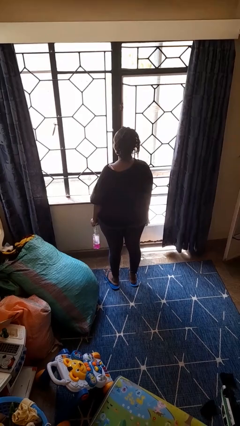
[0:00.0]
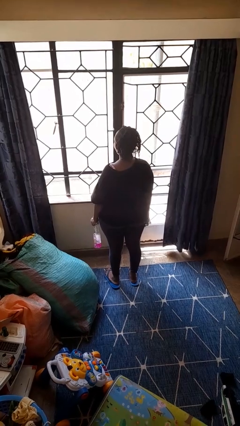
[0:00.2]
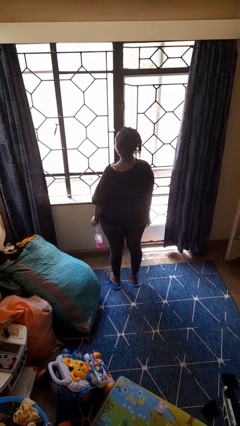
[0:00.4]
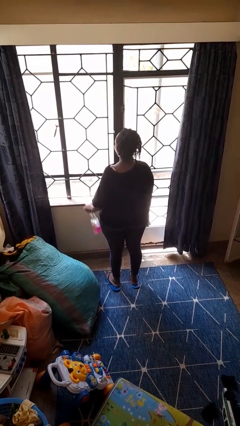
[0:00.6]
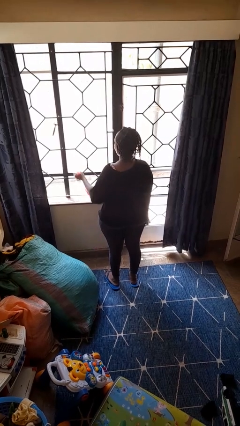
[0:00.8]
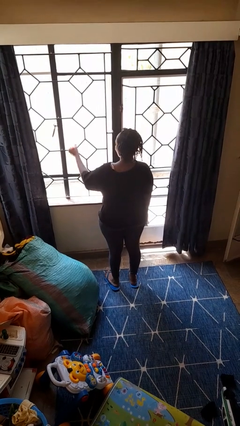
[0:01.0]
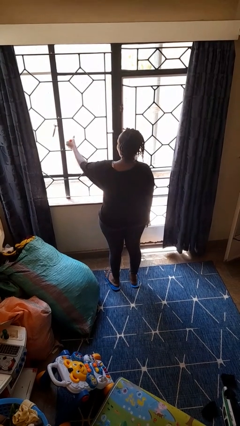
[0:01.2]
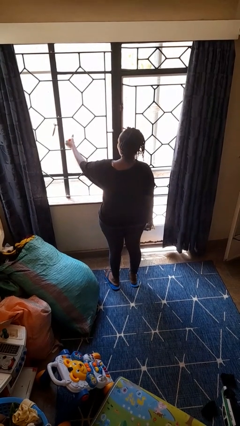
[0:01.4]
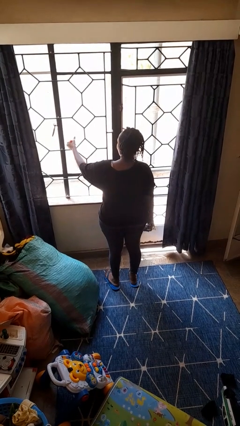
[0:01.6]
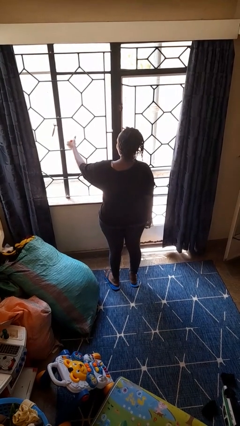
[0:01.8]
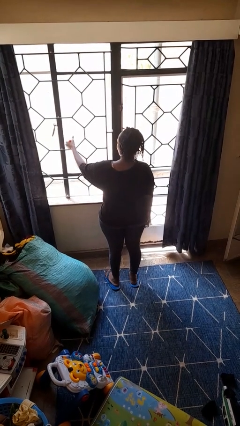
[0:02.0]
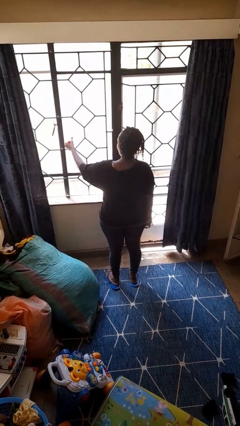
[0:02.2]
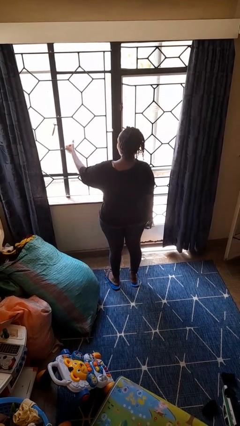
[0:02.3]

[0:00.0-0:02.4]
person sprays from bottle

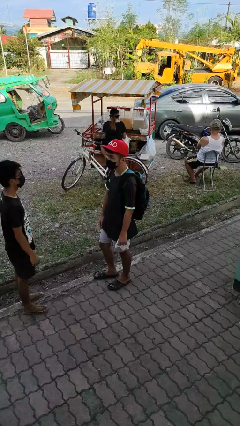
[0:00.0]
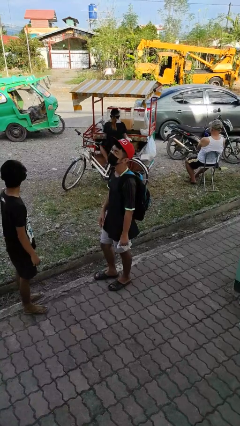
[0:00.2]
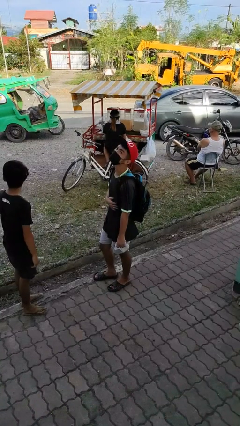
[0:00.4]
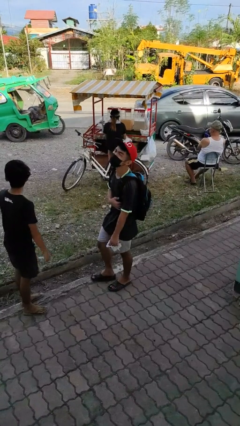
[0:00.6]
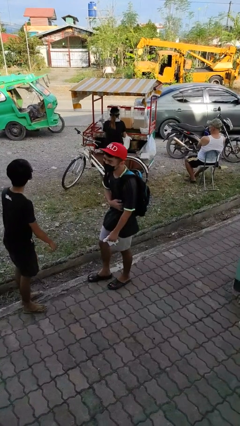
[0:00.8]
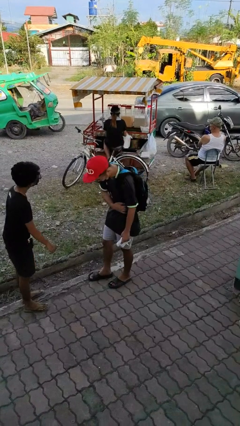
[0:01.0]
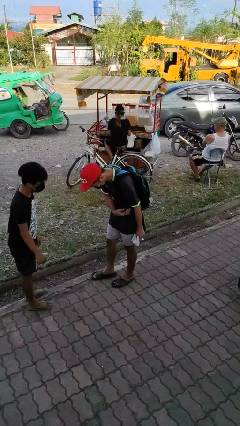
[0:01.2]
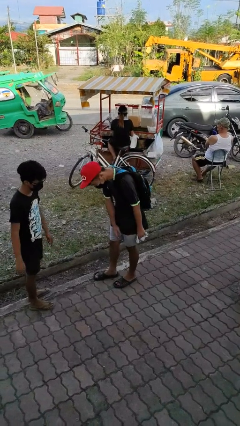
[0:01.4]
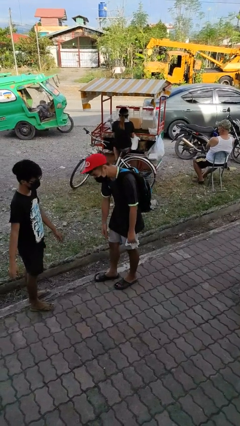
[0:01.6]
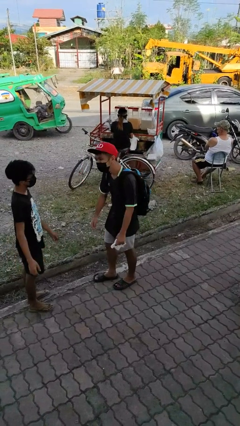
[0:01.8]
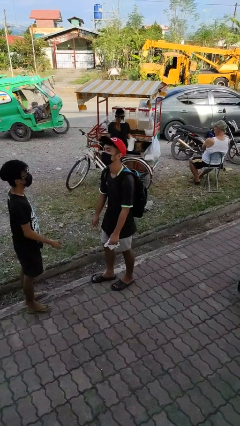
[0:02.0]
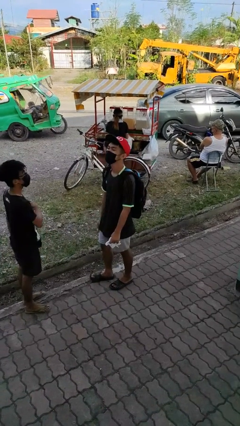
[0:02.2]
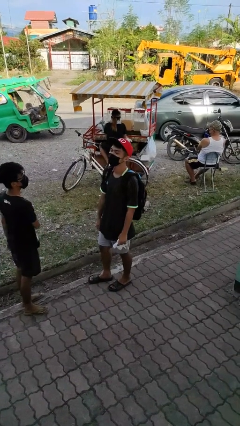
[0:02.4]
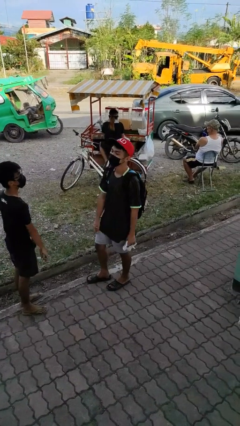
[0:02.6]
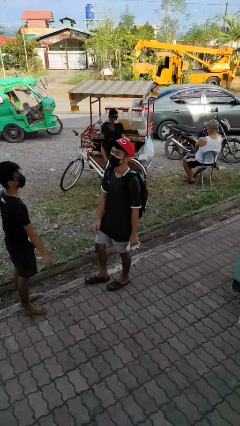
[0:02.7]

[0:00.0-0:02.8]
person laughs with person

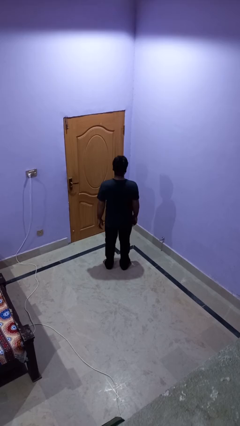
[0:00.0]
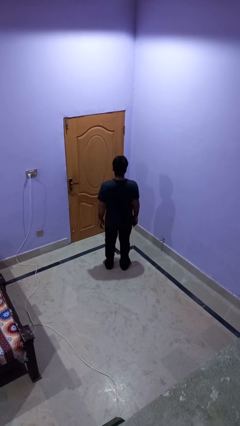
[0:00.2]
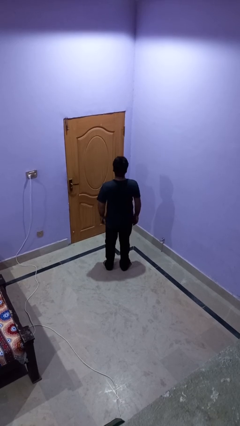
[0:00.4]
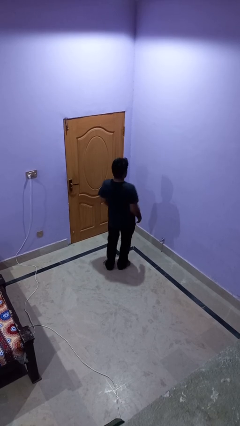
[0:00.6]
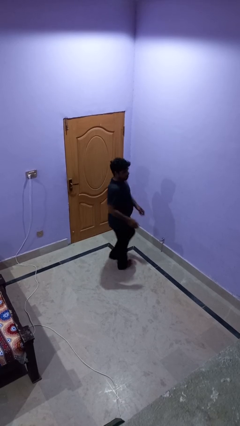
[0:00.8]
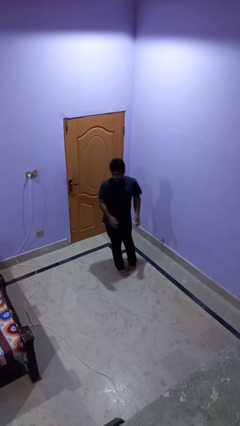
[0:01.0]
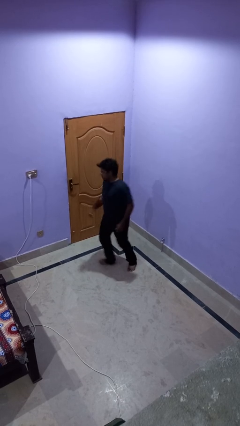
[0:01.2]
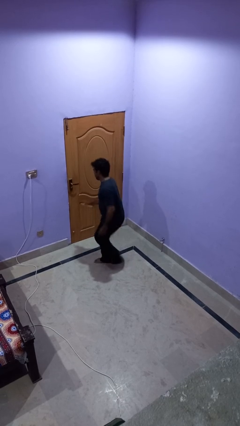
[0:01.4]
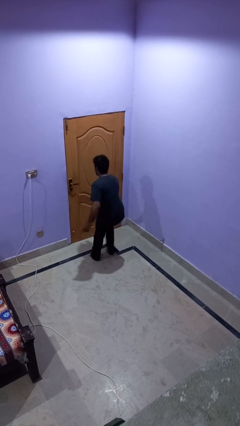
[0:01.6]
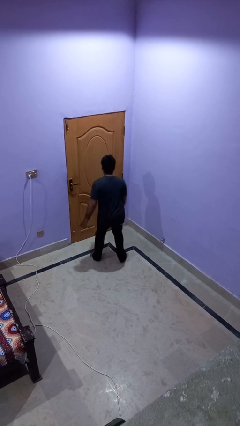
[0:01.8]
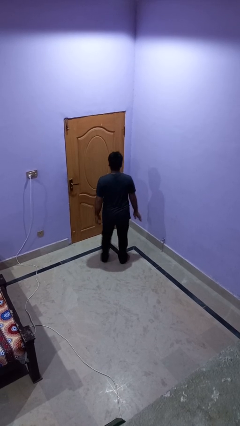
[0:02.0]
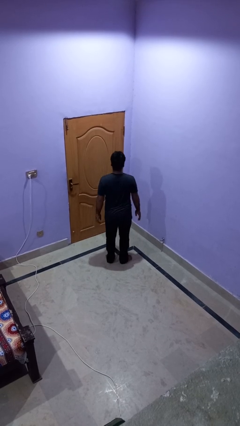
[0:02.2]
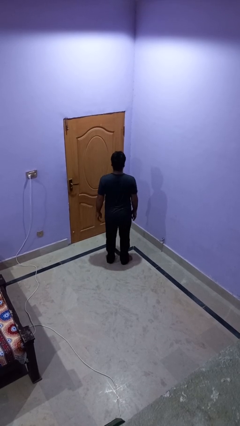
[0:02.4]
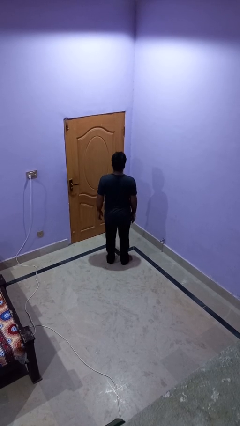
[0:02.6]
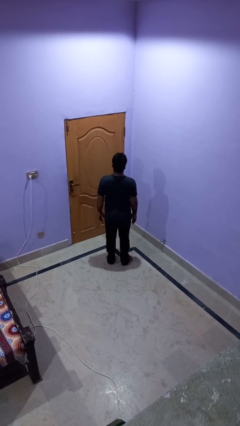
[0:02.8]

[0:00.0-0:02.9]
person twirls

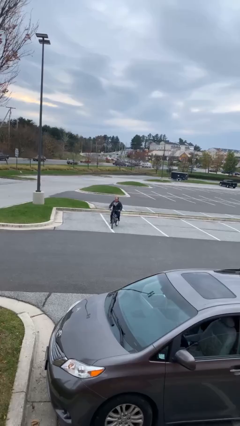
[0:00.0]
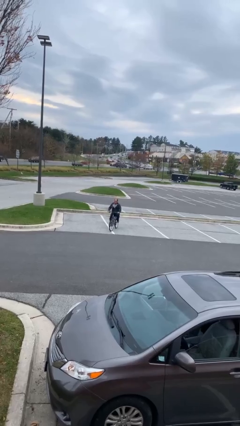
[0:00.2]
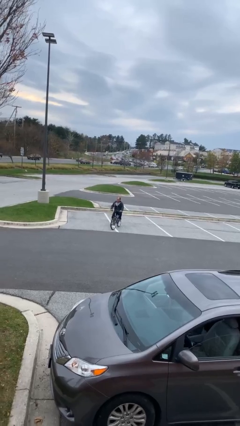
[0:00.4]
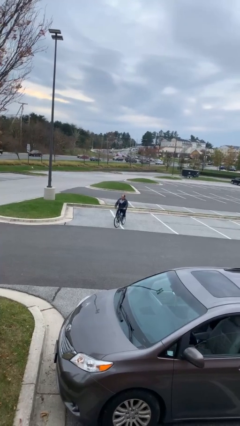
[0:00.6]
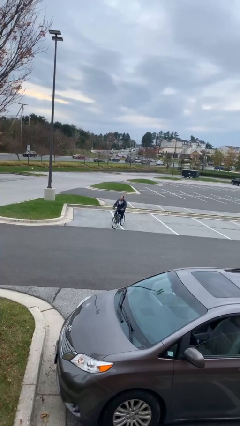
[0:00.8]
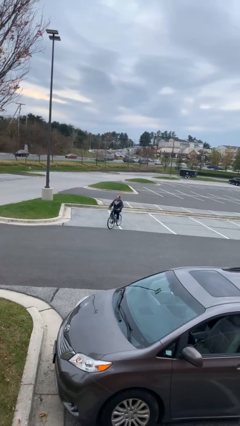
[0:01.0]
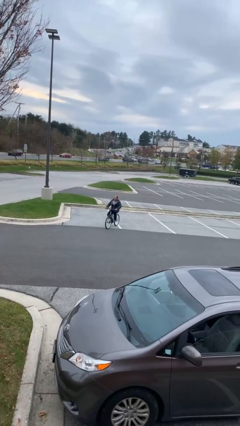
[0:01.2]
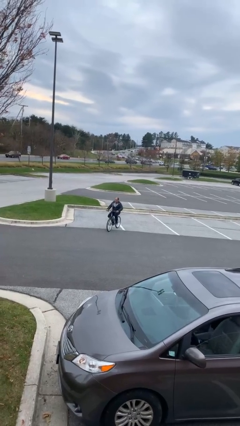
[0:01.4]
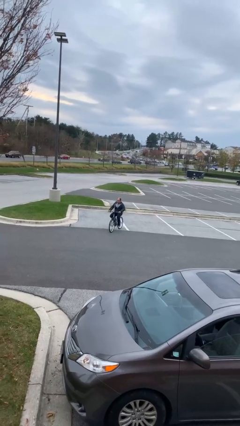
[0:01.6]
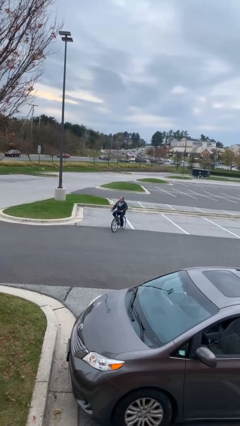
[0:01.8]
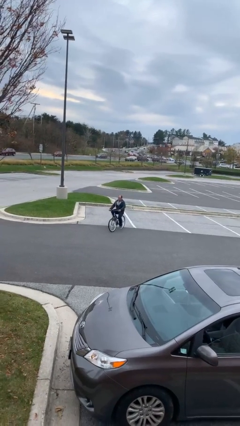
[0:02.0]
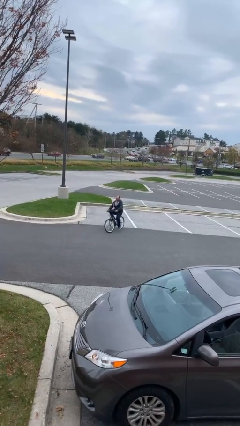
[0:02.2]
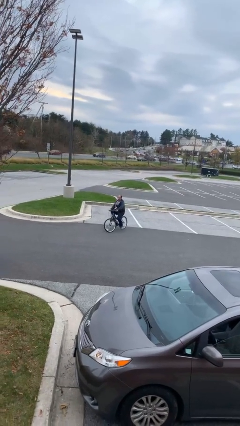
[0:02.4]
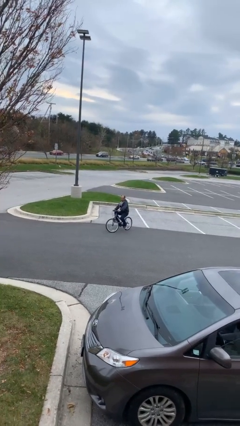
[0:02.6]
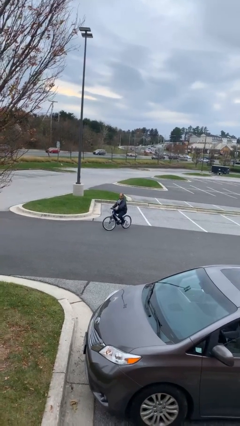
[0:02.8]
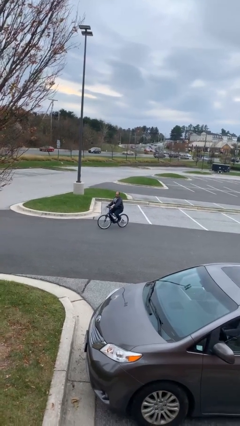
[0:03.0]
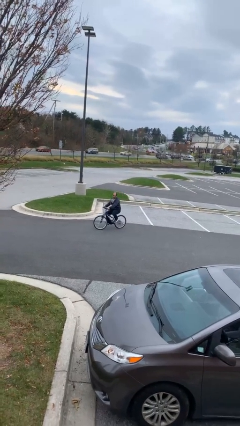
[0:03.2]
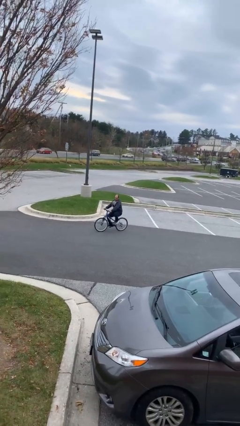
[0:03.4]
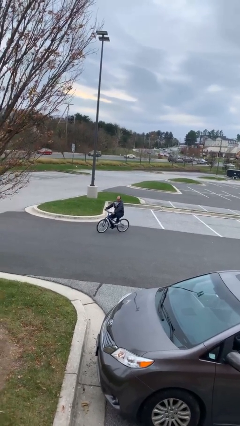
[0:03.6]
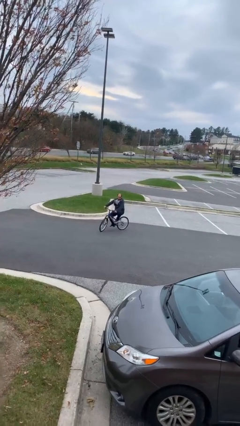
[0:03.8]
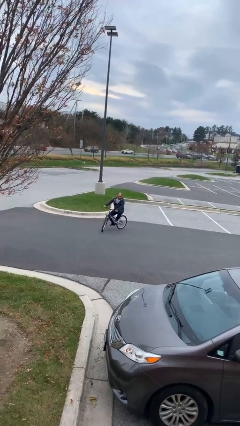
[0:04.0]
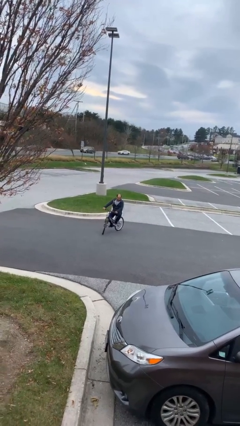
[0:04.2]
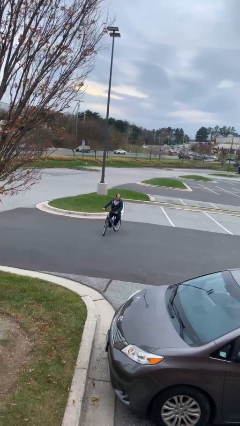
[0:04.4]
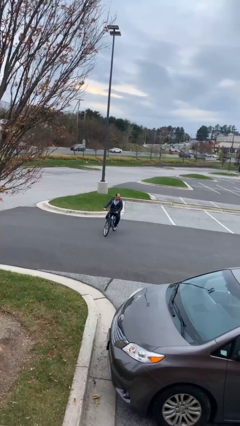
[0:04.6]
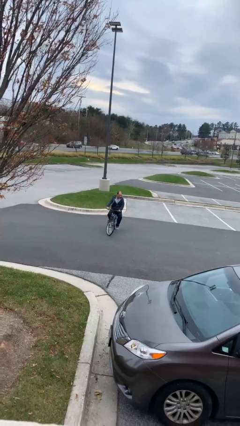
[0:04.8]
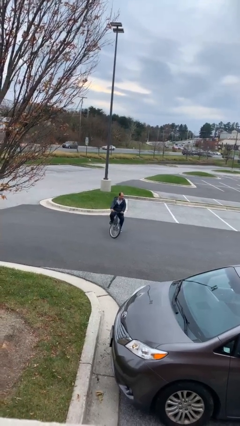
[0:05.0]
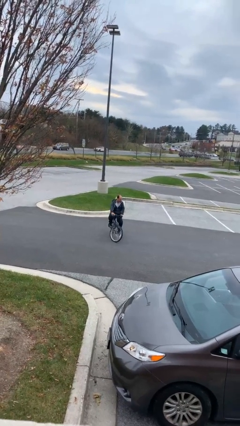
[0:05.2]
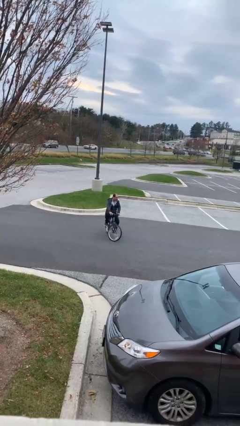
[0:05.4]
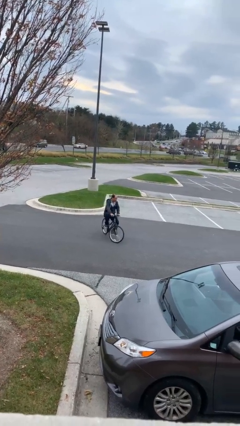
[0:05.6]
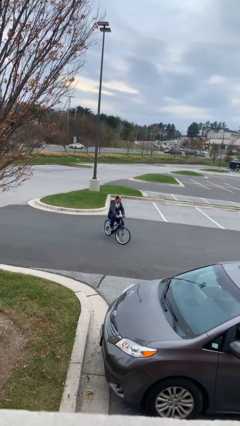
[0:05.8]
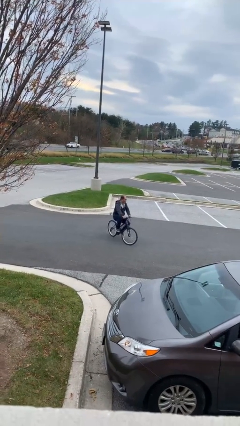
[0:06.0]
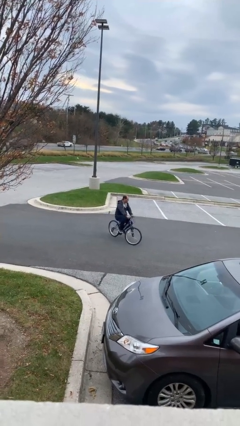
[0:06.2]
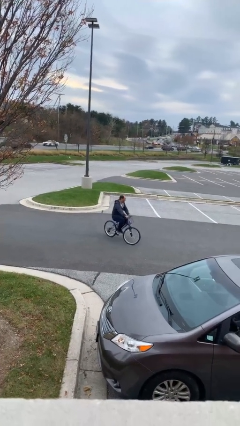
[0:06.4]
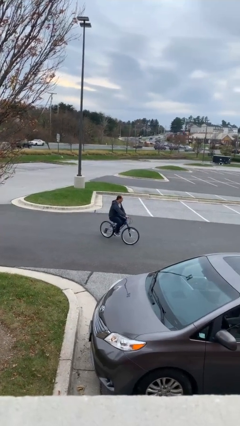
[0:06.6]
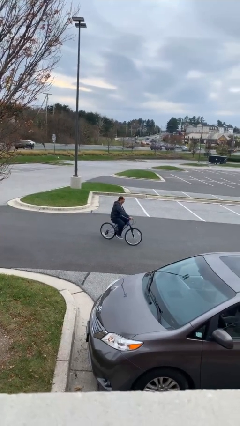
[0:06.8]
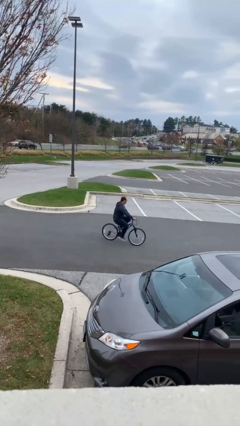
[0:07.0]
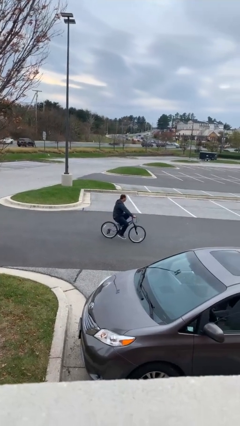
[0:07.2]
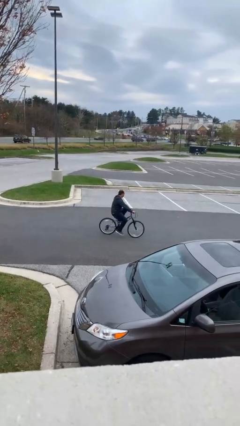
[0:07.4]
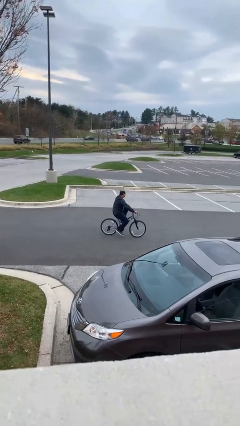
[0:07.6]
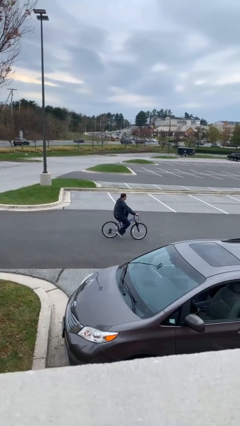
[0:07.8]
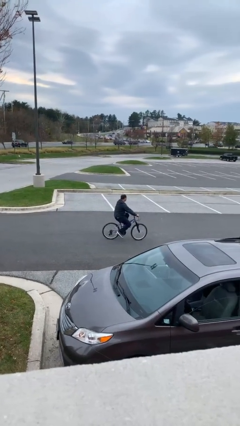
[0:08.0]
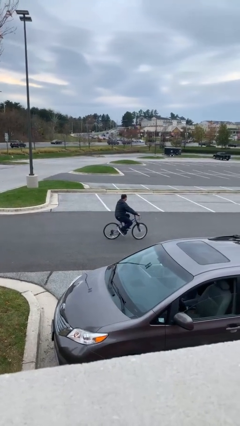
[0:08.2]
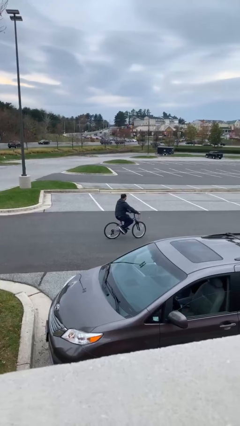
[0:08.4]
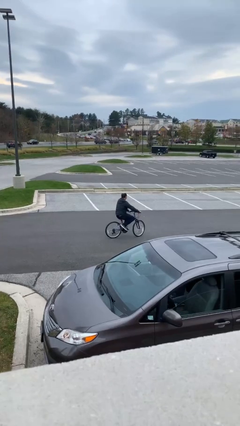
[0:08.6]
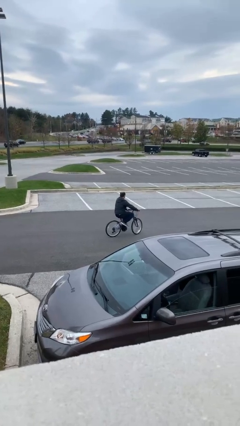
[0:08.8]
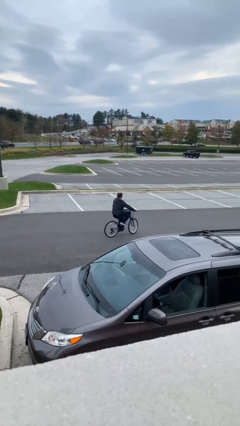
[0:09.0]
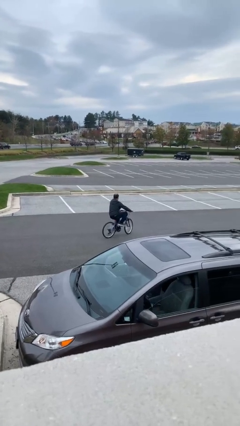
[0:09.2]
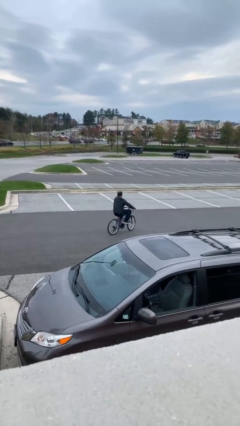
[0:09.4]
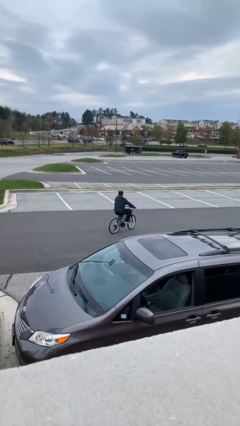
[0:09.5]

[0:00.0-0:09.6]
person rides bicycle
